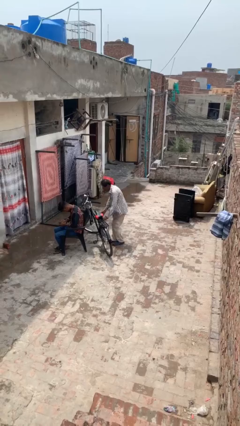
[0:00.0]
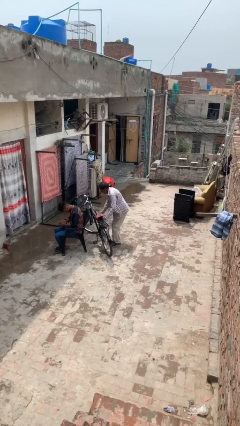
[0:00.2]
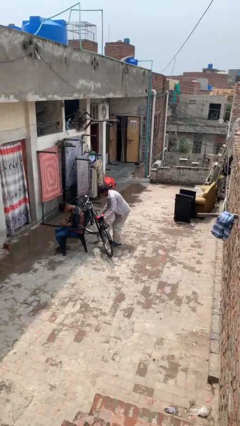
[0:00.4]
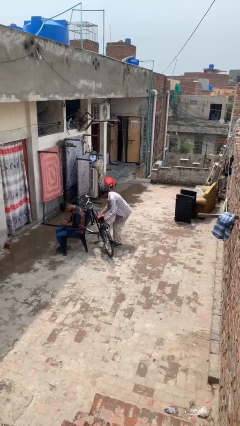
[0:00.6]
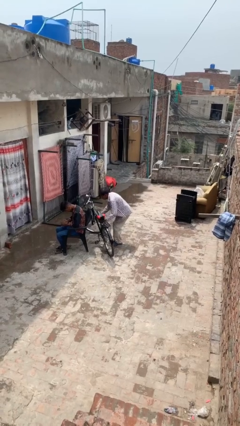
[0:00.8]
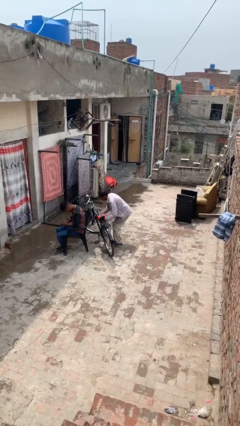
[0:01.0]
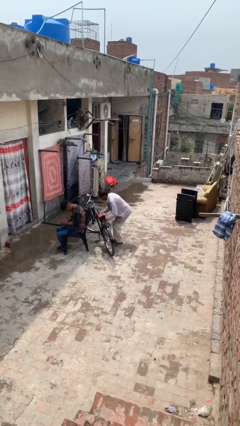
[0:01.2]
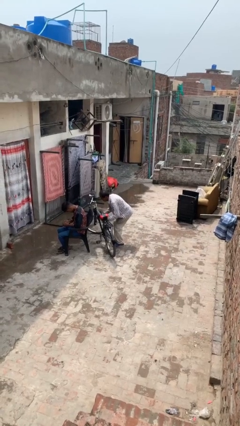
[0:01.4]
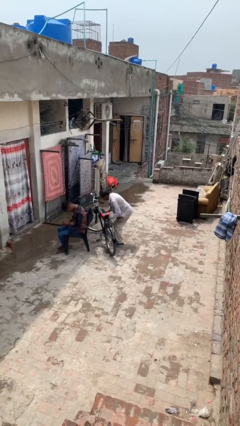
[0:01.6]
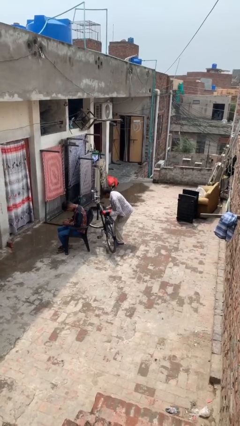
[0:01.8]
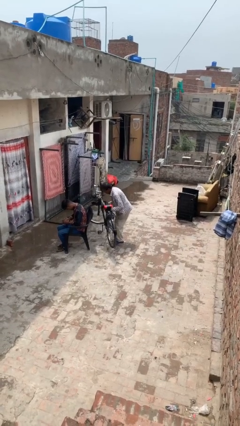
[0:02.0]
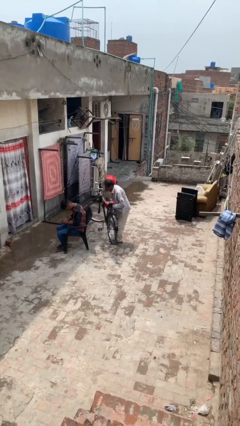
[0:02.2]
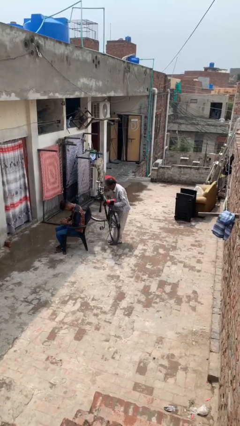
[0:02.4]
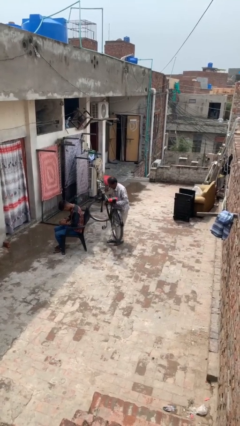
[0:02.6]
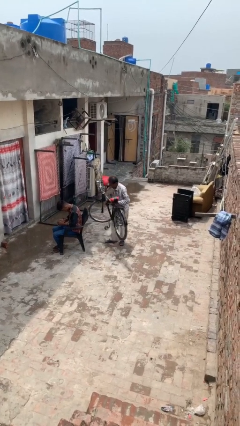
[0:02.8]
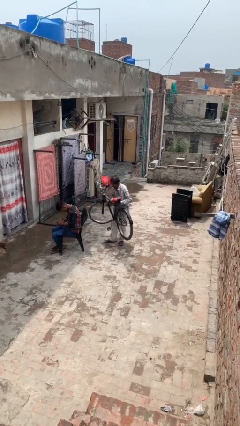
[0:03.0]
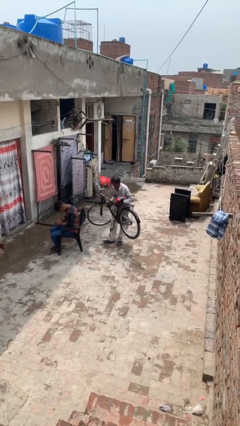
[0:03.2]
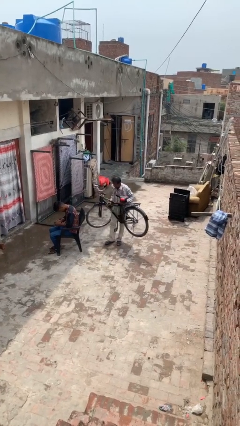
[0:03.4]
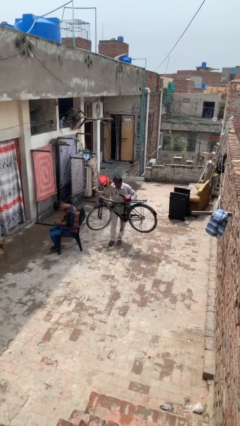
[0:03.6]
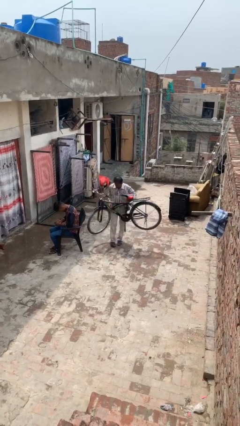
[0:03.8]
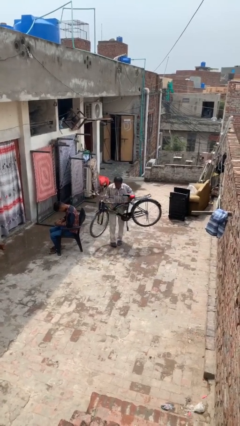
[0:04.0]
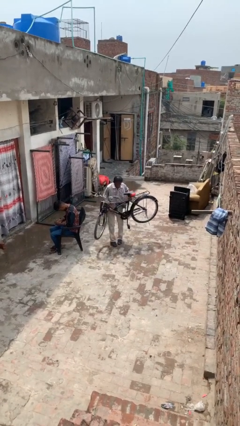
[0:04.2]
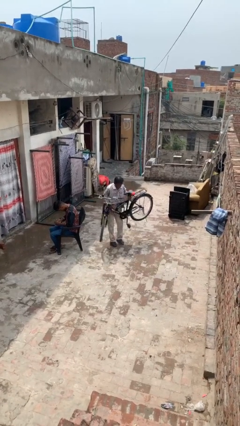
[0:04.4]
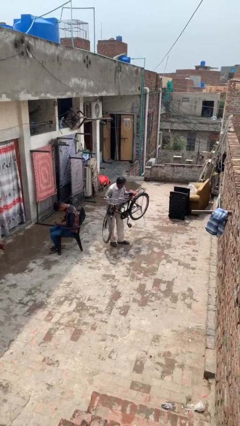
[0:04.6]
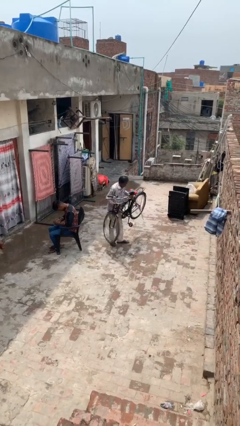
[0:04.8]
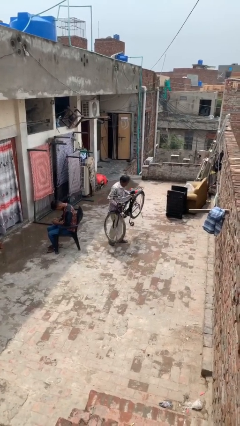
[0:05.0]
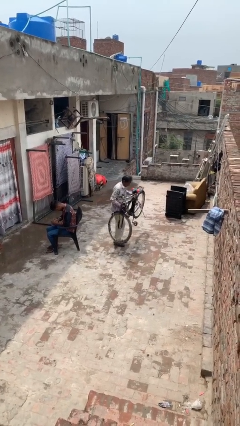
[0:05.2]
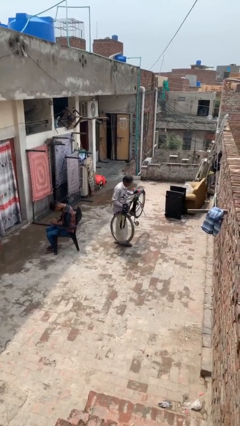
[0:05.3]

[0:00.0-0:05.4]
person steals object from person

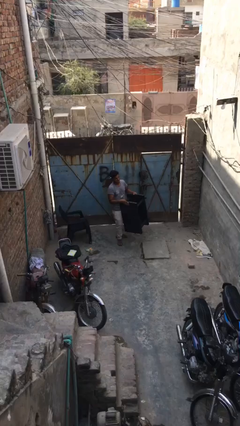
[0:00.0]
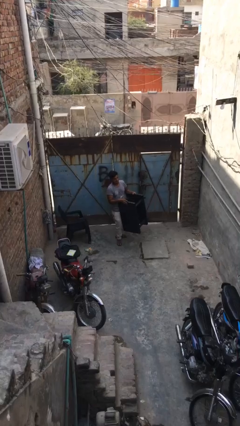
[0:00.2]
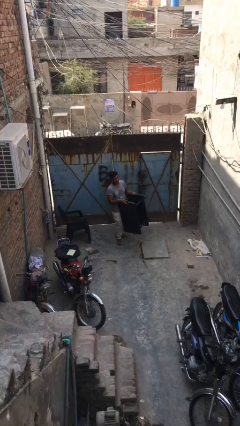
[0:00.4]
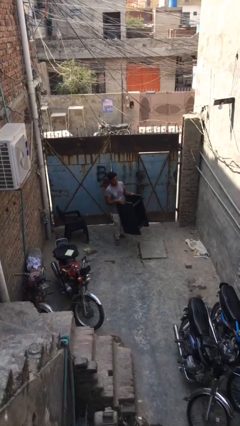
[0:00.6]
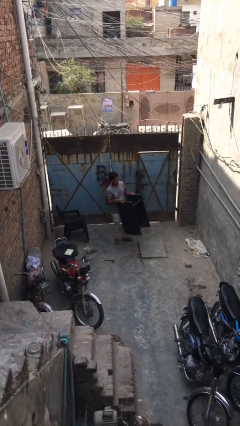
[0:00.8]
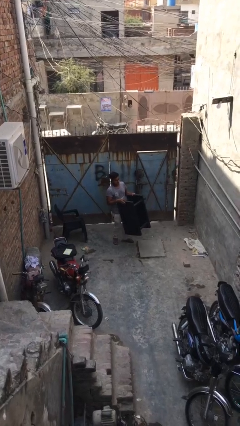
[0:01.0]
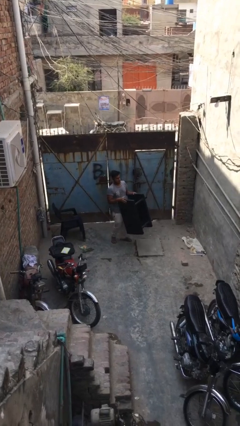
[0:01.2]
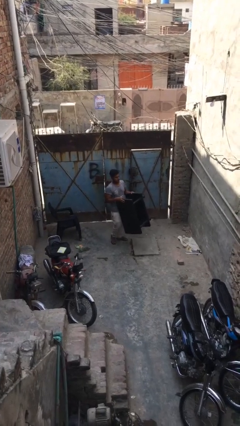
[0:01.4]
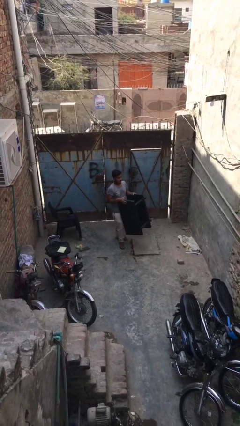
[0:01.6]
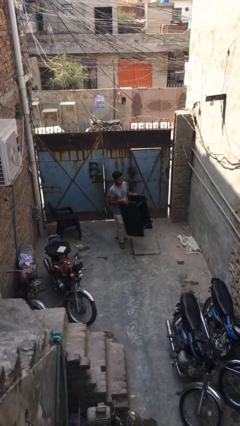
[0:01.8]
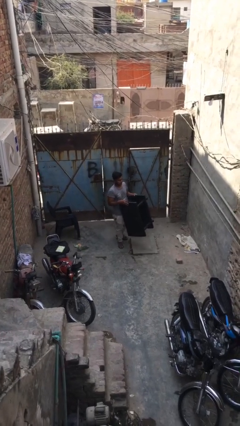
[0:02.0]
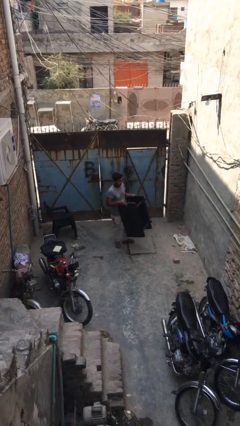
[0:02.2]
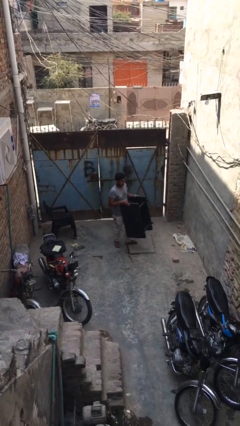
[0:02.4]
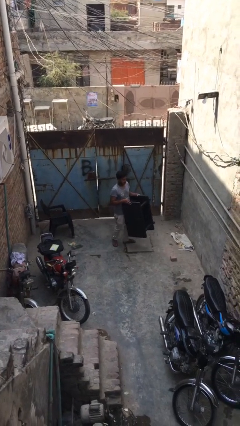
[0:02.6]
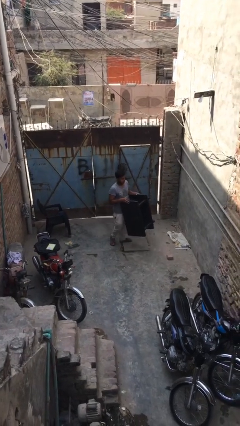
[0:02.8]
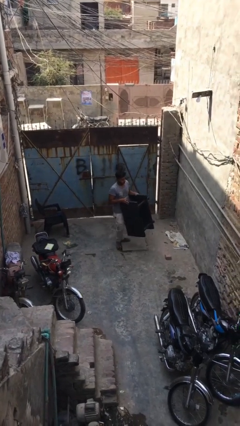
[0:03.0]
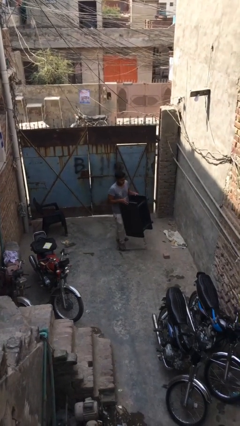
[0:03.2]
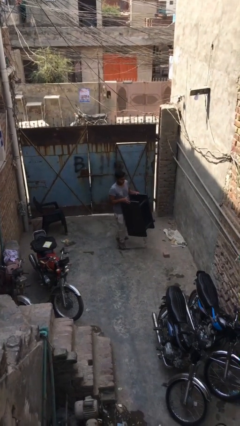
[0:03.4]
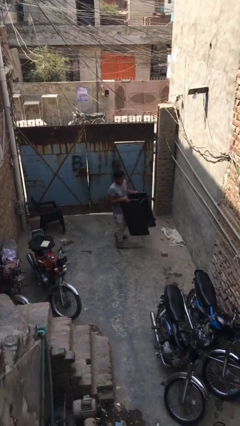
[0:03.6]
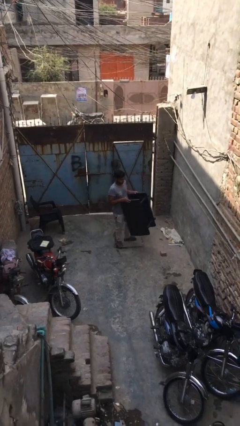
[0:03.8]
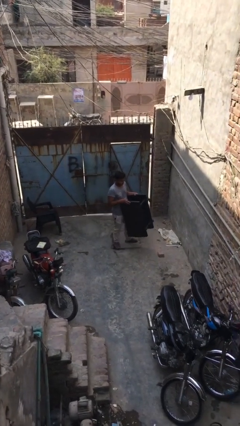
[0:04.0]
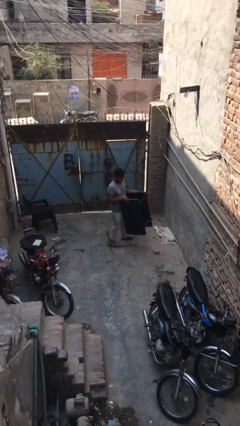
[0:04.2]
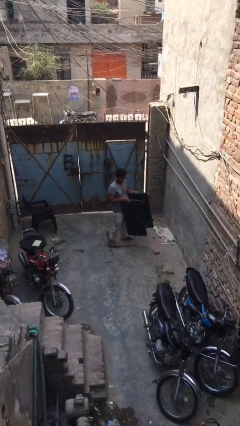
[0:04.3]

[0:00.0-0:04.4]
person carries heavy object

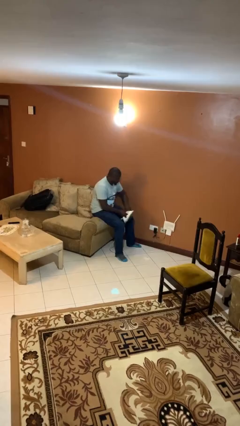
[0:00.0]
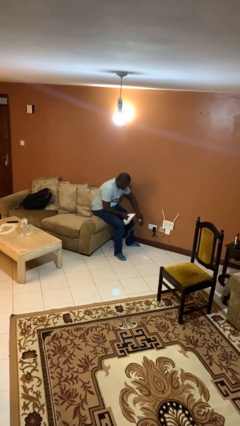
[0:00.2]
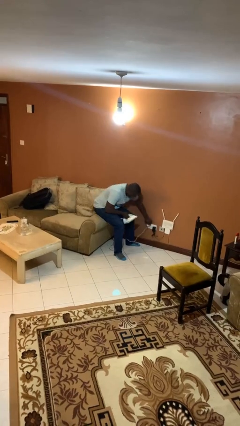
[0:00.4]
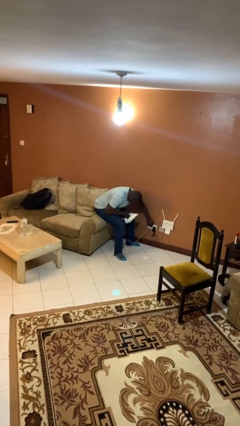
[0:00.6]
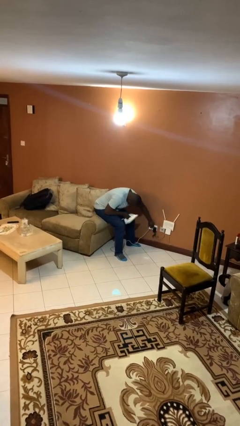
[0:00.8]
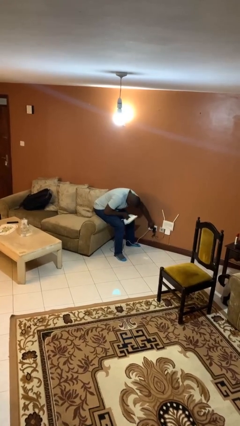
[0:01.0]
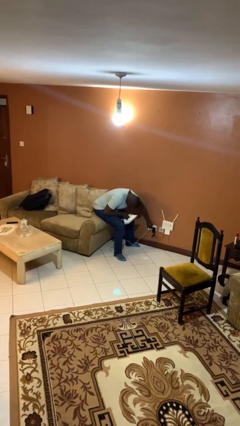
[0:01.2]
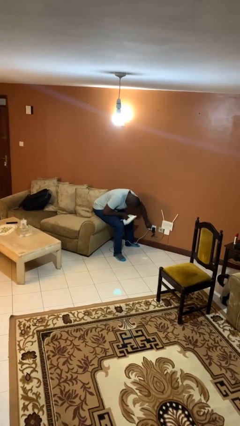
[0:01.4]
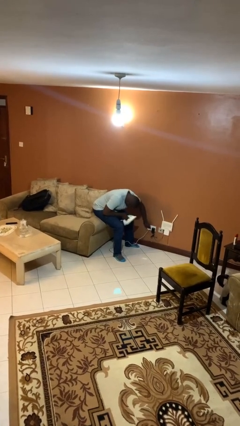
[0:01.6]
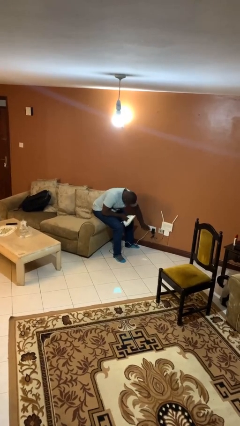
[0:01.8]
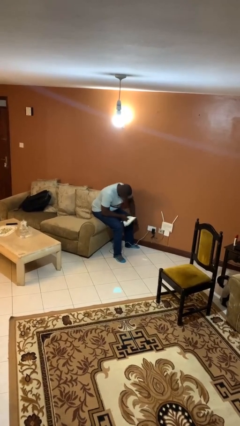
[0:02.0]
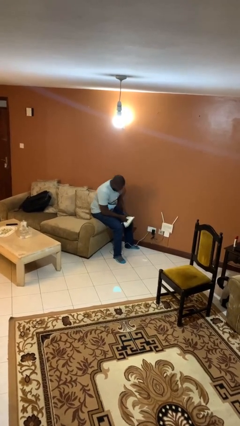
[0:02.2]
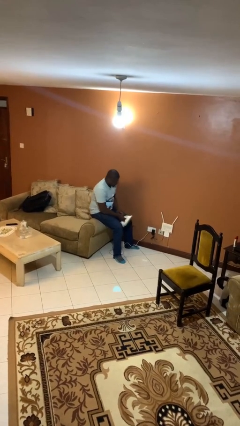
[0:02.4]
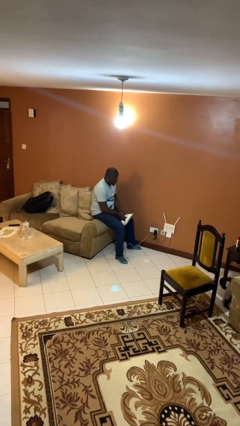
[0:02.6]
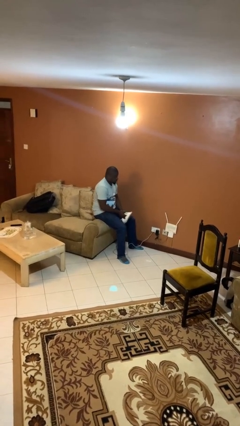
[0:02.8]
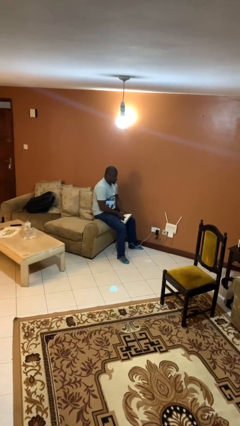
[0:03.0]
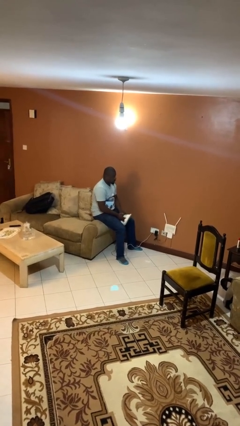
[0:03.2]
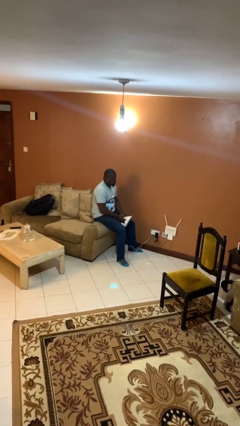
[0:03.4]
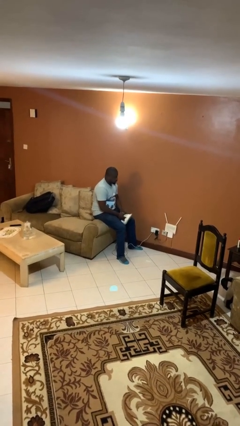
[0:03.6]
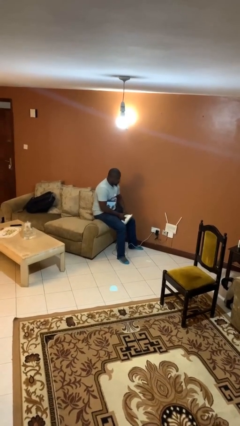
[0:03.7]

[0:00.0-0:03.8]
person plugs into electrical socket

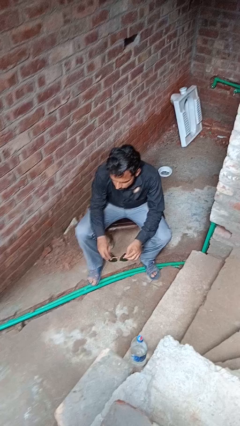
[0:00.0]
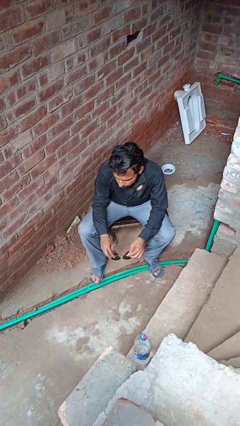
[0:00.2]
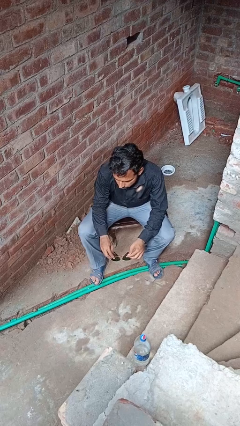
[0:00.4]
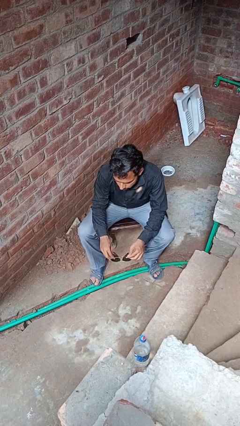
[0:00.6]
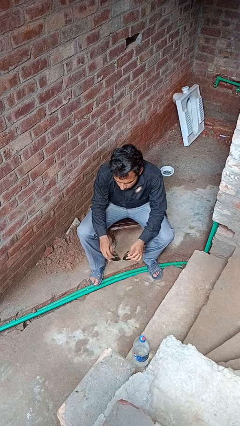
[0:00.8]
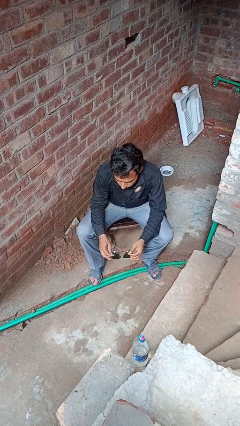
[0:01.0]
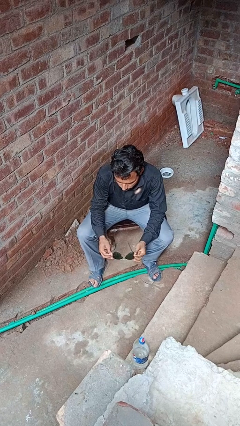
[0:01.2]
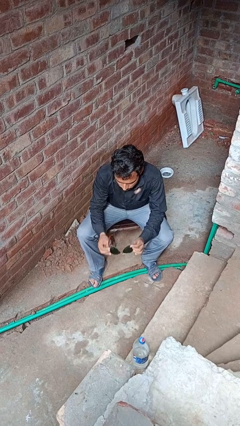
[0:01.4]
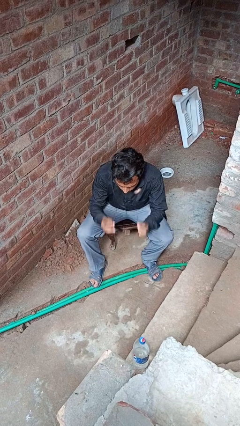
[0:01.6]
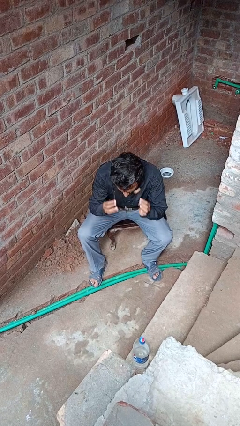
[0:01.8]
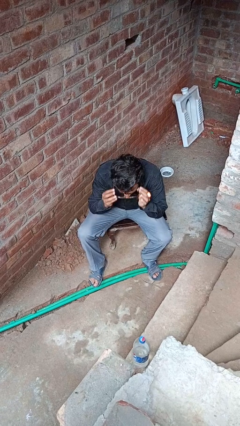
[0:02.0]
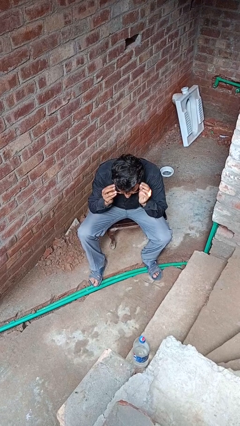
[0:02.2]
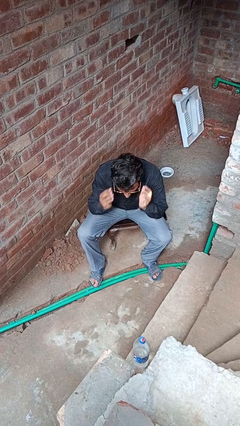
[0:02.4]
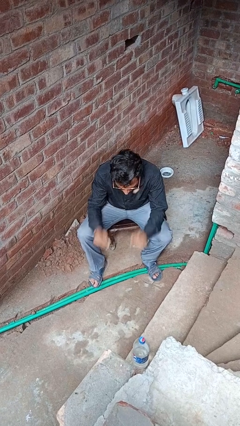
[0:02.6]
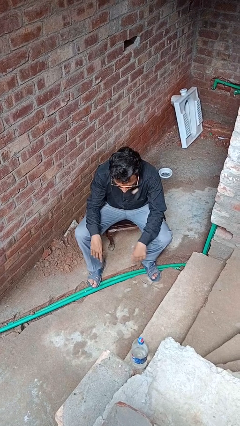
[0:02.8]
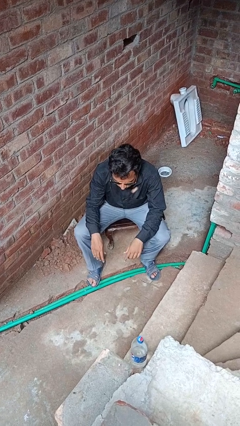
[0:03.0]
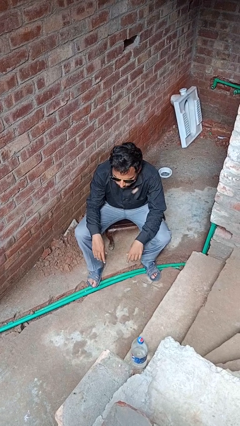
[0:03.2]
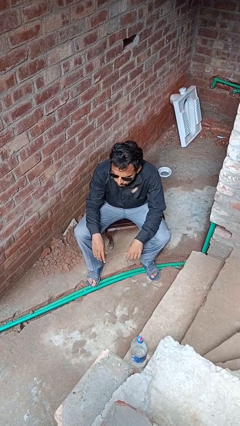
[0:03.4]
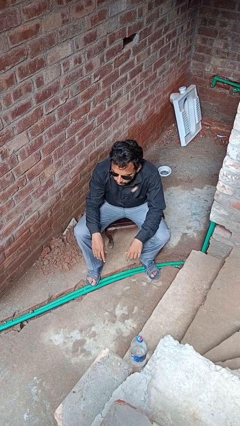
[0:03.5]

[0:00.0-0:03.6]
person puts on glasses

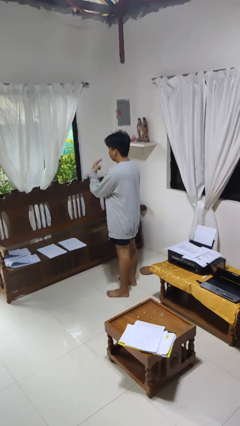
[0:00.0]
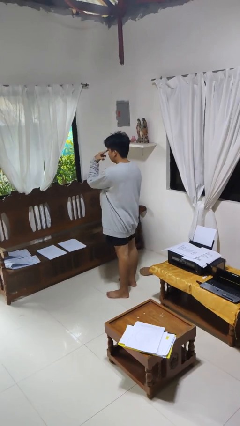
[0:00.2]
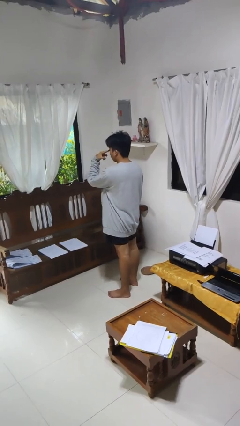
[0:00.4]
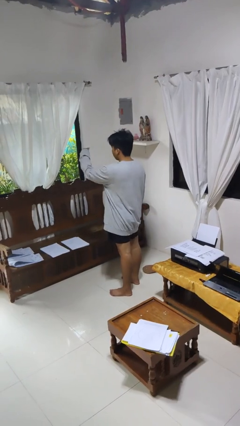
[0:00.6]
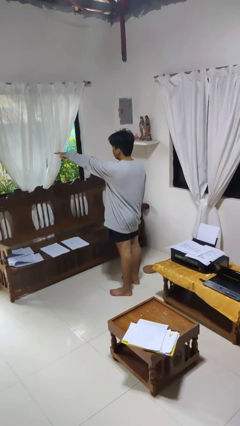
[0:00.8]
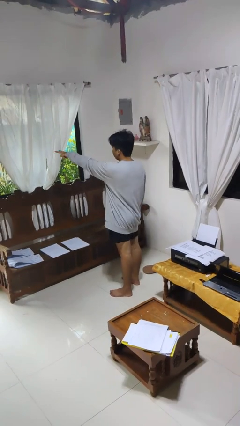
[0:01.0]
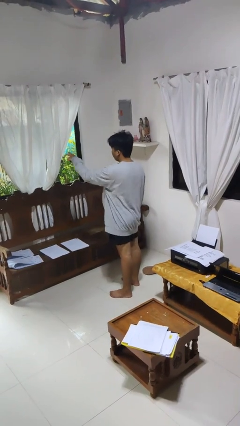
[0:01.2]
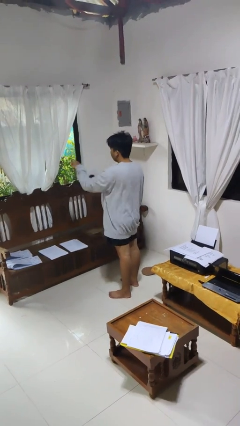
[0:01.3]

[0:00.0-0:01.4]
person gestures watch closely
